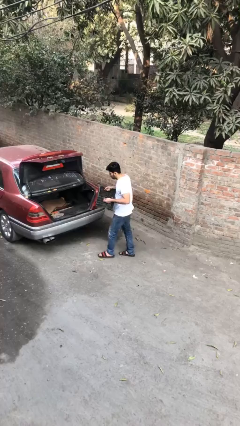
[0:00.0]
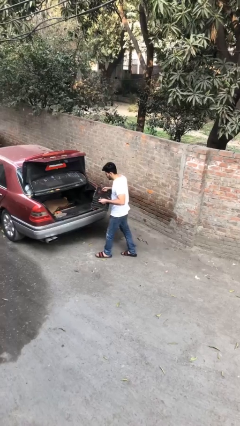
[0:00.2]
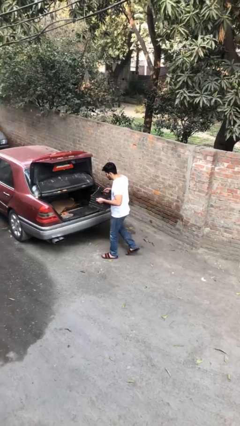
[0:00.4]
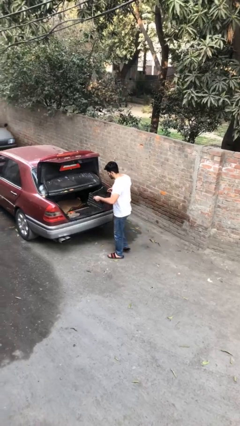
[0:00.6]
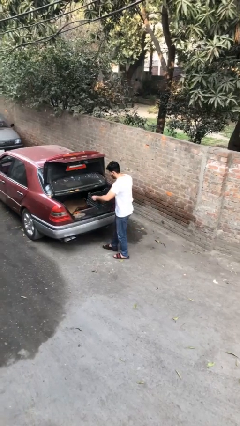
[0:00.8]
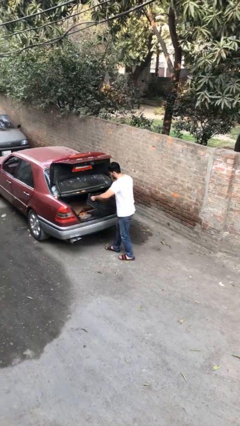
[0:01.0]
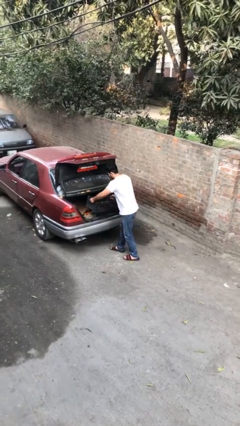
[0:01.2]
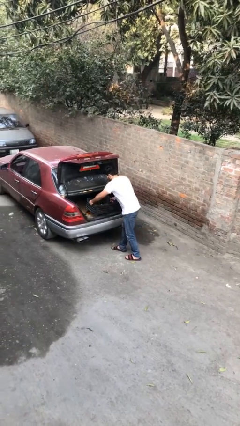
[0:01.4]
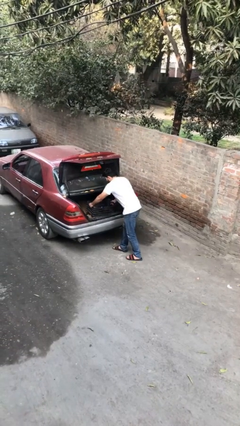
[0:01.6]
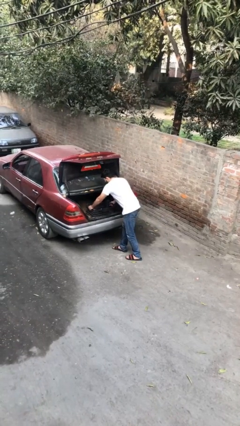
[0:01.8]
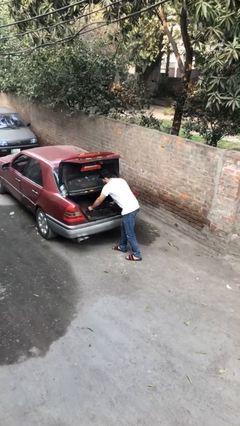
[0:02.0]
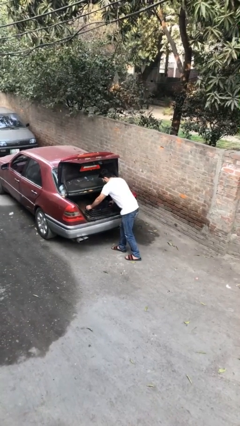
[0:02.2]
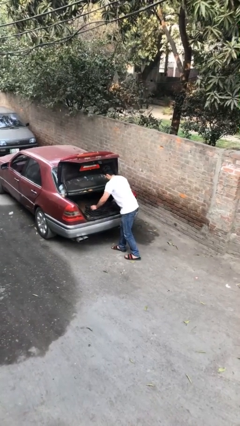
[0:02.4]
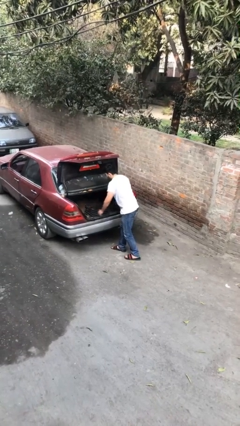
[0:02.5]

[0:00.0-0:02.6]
person loads car

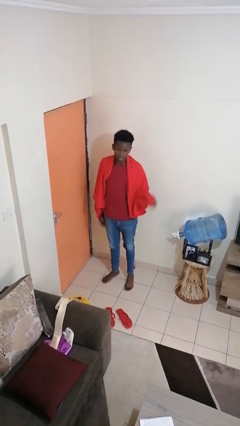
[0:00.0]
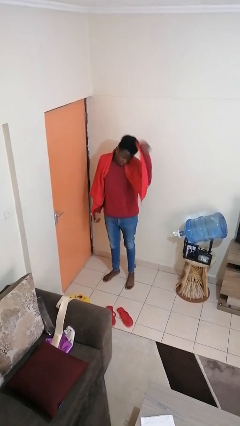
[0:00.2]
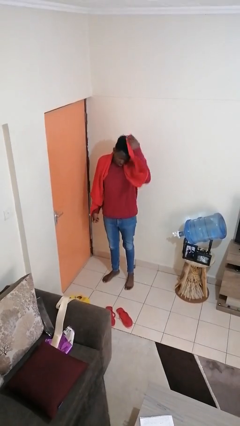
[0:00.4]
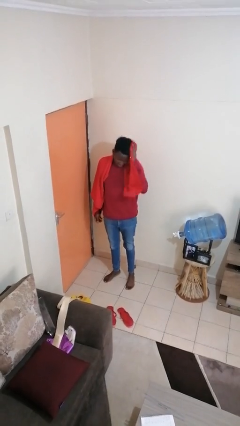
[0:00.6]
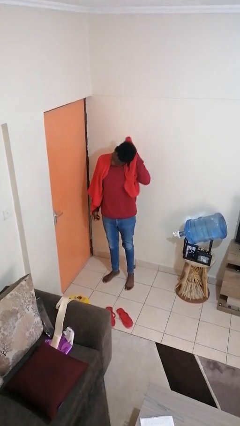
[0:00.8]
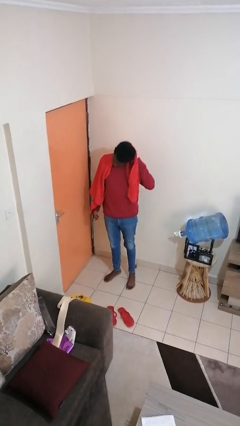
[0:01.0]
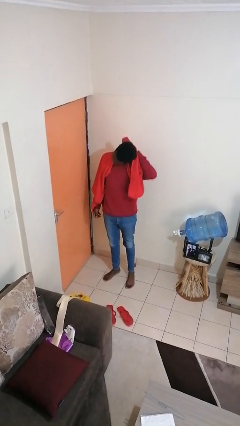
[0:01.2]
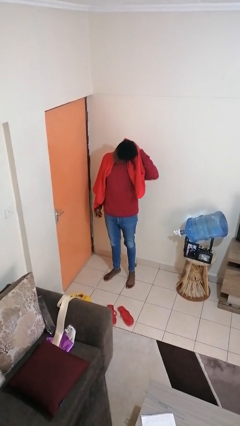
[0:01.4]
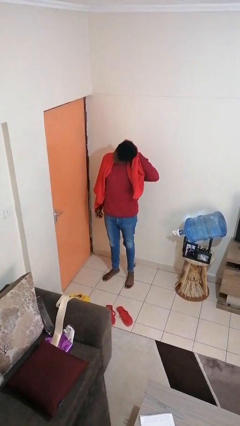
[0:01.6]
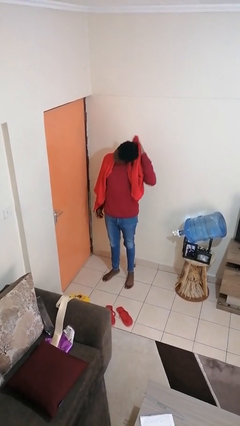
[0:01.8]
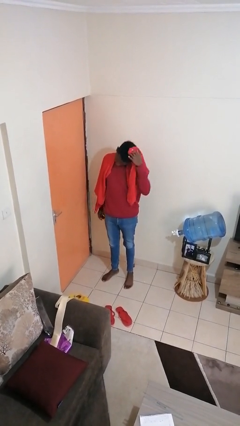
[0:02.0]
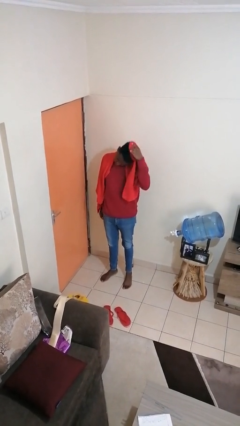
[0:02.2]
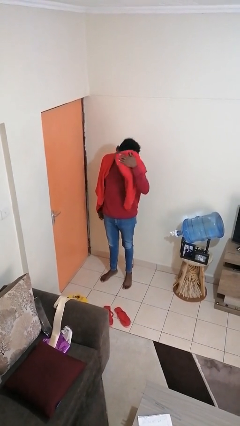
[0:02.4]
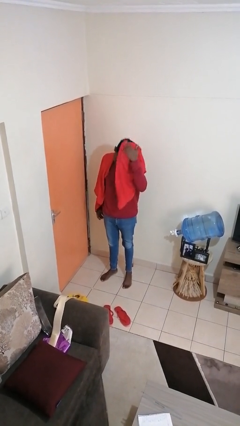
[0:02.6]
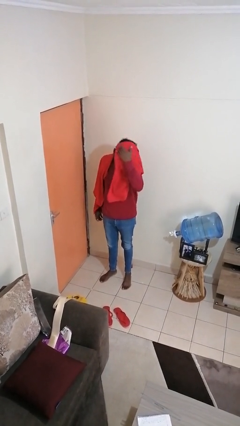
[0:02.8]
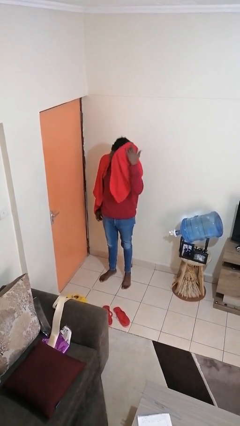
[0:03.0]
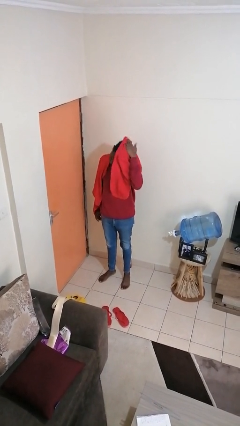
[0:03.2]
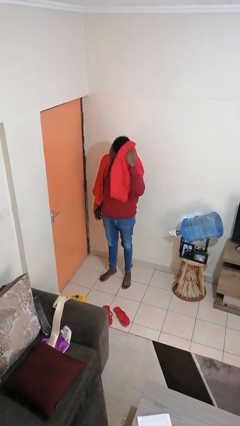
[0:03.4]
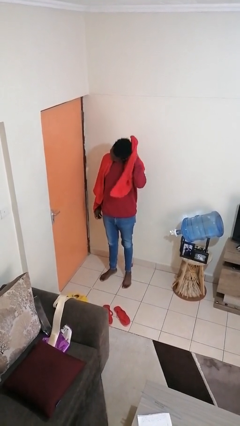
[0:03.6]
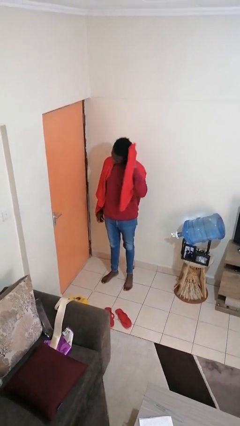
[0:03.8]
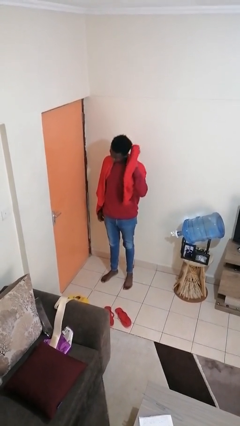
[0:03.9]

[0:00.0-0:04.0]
person dries hair with towel

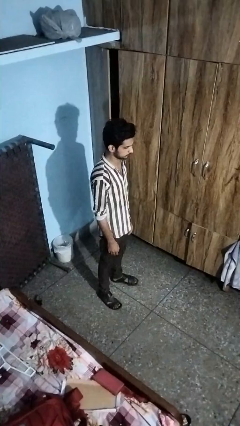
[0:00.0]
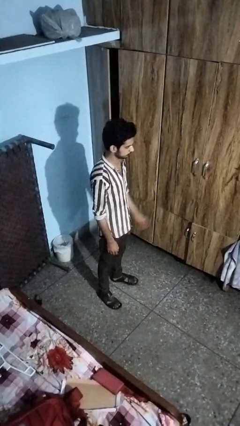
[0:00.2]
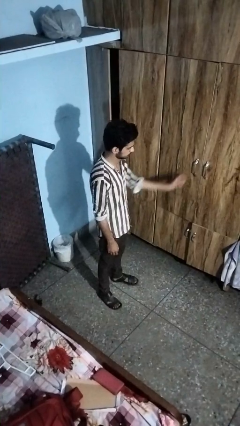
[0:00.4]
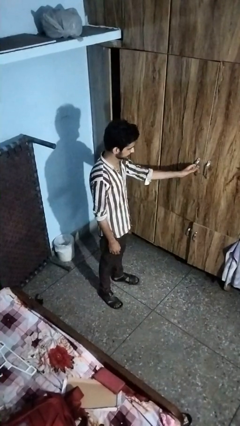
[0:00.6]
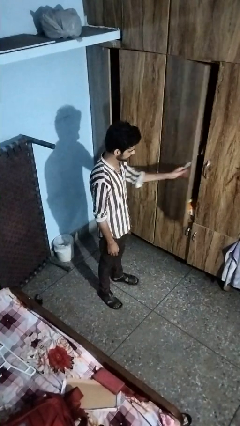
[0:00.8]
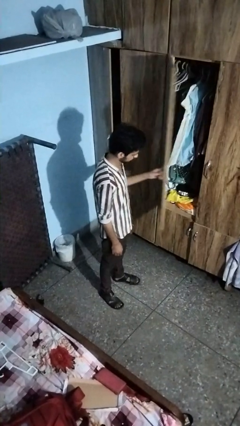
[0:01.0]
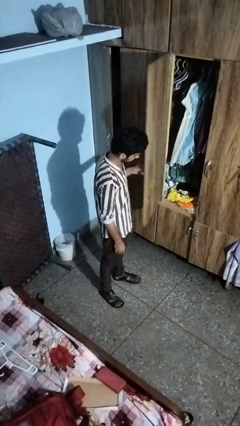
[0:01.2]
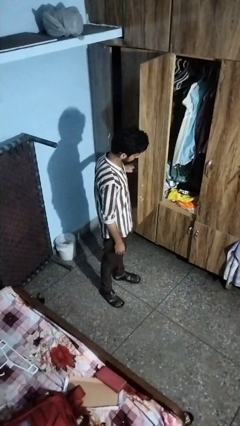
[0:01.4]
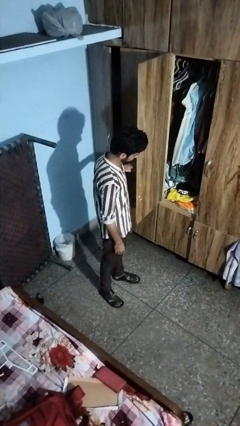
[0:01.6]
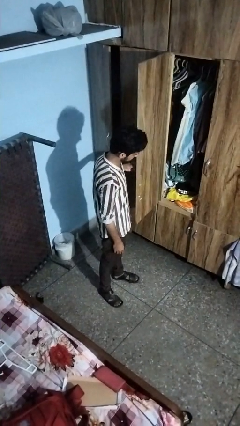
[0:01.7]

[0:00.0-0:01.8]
person opens closet door

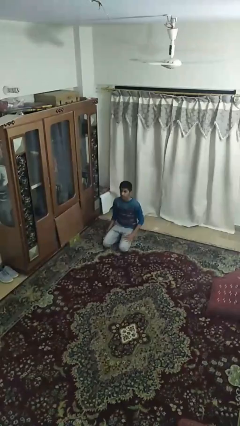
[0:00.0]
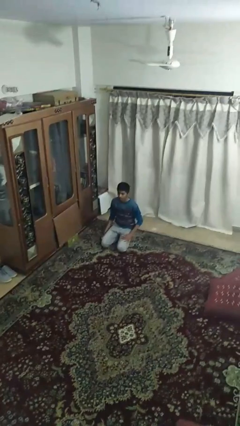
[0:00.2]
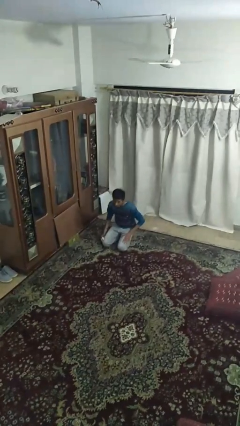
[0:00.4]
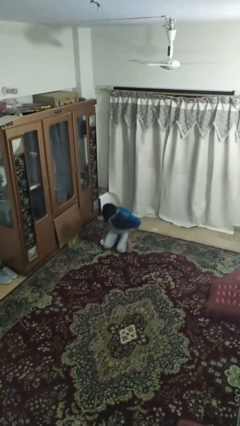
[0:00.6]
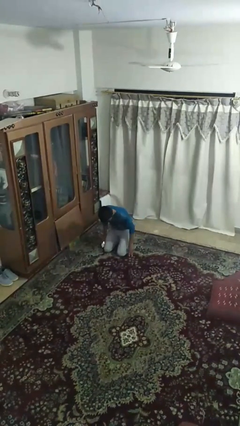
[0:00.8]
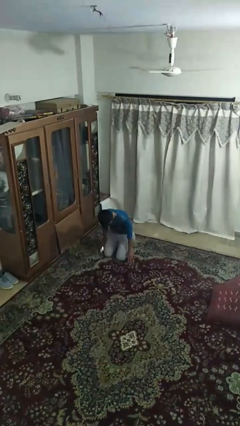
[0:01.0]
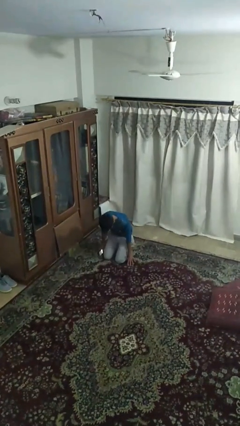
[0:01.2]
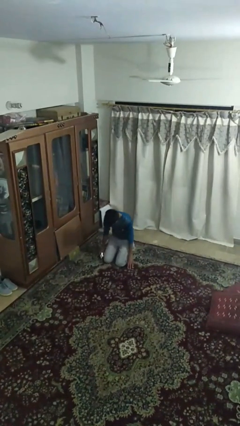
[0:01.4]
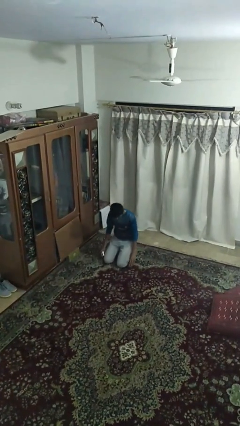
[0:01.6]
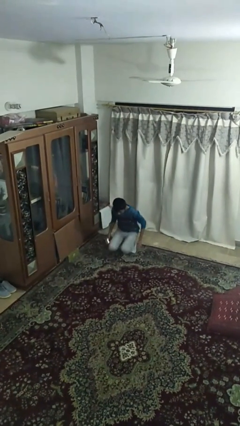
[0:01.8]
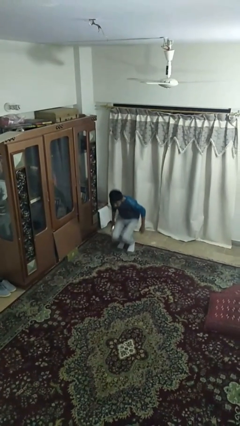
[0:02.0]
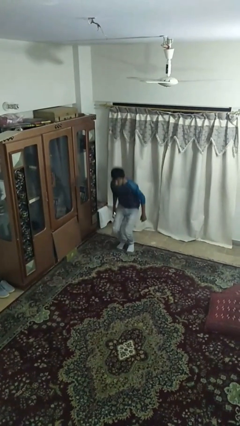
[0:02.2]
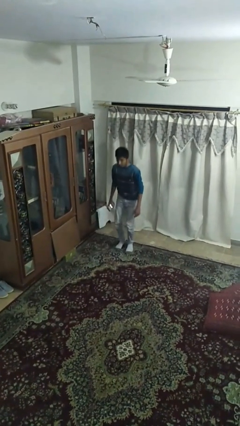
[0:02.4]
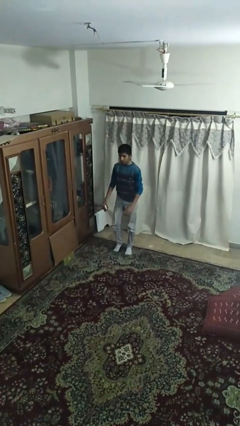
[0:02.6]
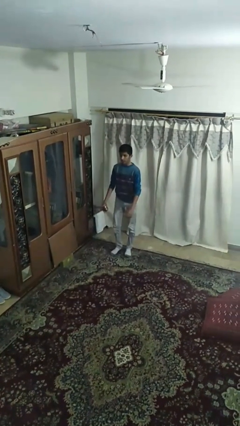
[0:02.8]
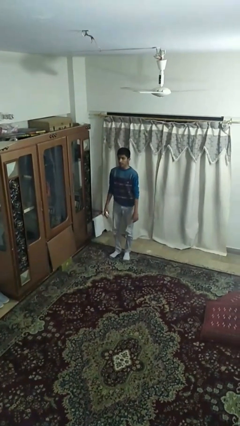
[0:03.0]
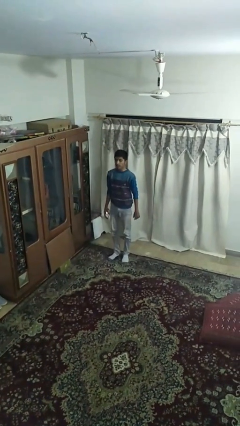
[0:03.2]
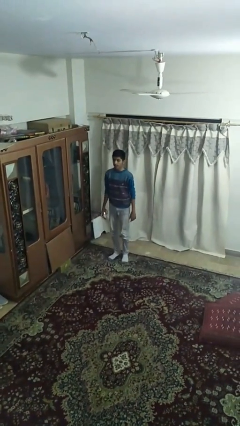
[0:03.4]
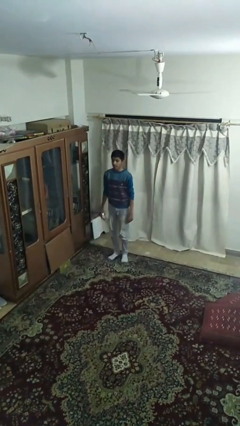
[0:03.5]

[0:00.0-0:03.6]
person stands up

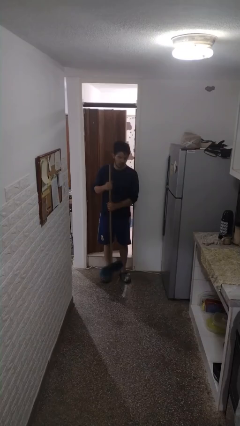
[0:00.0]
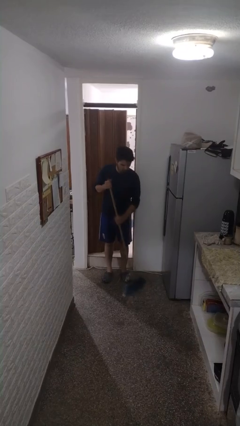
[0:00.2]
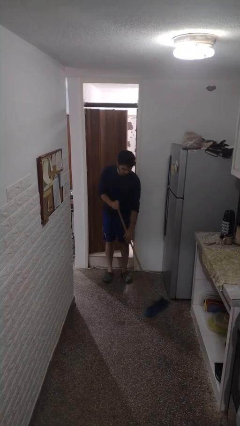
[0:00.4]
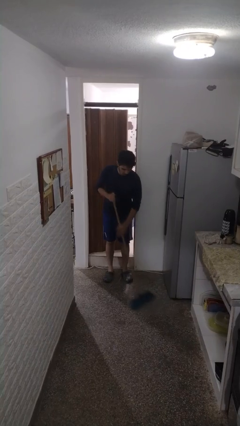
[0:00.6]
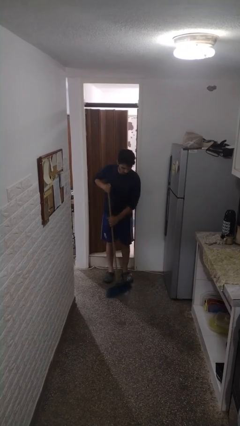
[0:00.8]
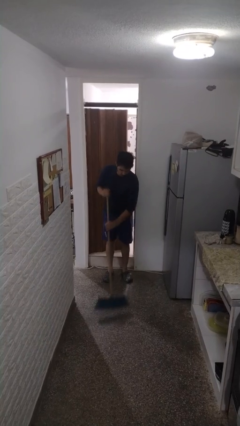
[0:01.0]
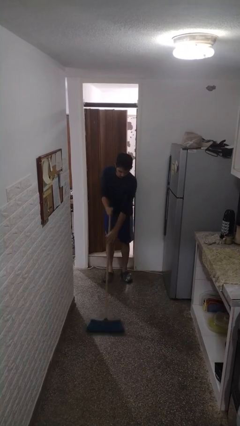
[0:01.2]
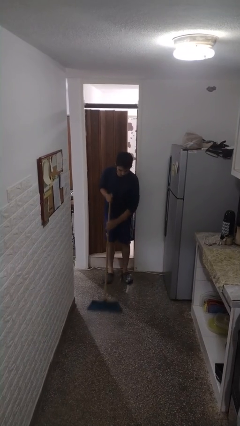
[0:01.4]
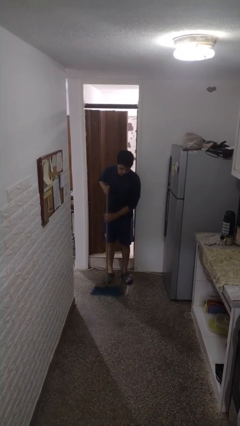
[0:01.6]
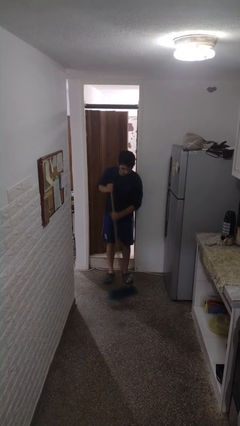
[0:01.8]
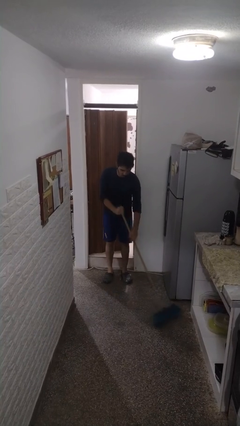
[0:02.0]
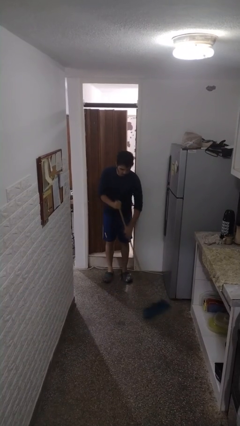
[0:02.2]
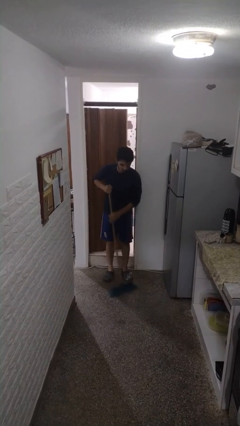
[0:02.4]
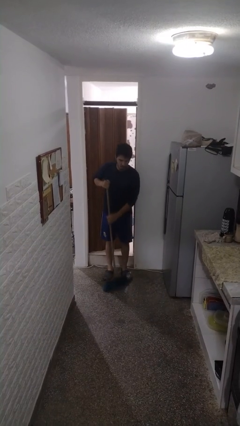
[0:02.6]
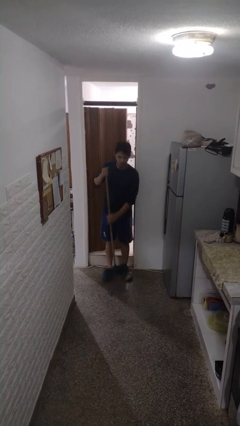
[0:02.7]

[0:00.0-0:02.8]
person sweeps floor

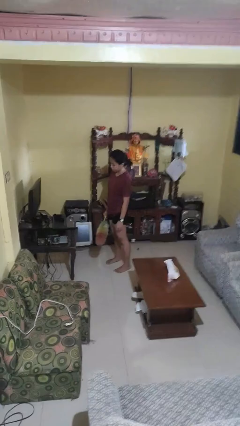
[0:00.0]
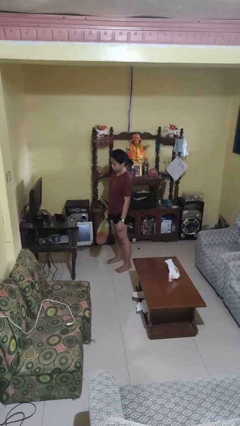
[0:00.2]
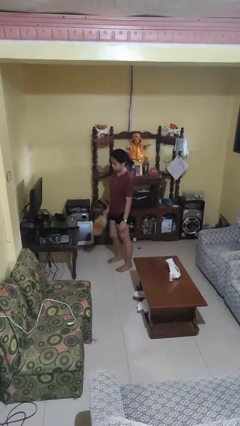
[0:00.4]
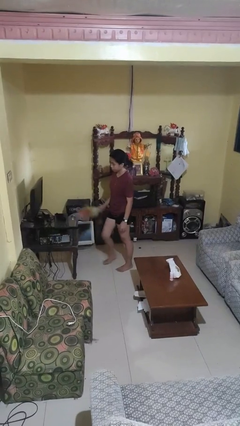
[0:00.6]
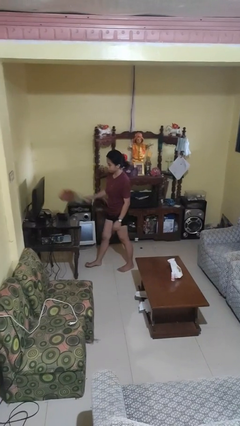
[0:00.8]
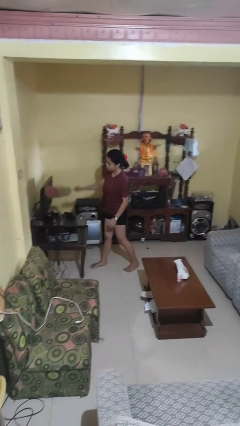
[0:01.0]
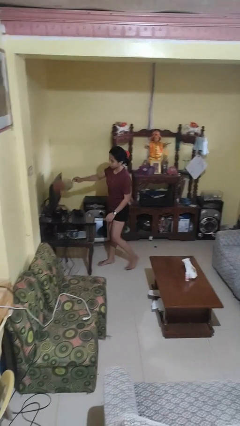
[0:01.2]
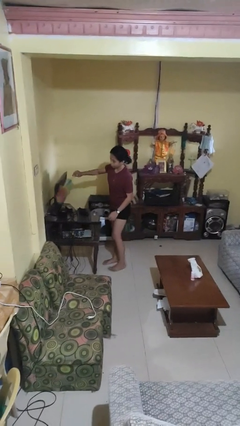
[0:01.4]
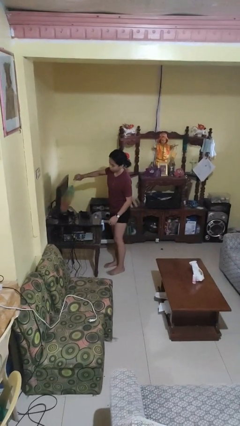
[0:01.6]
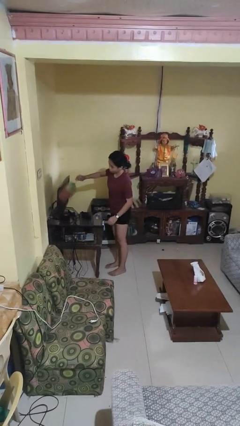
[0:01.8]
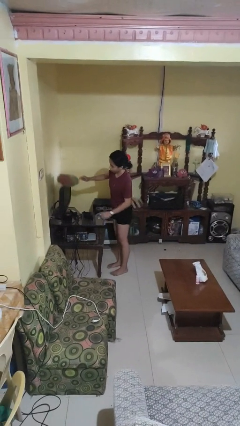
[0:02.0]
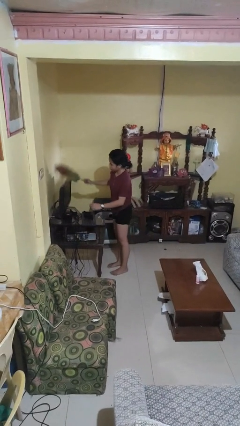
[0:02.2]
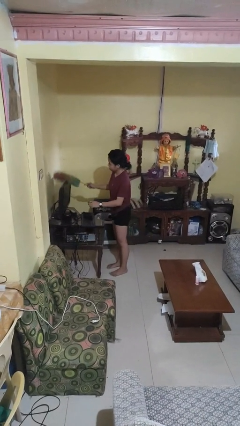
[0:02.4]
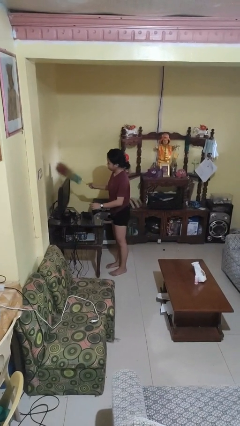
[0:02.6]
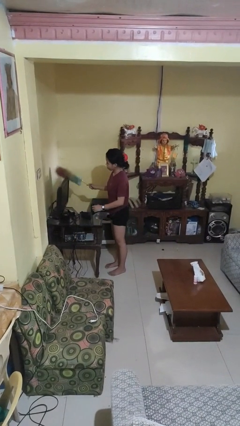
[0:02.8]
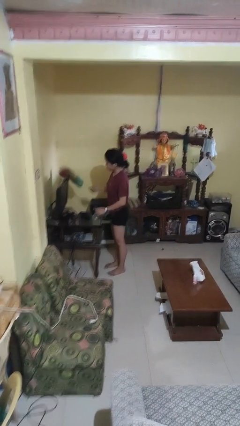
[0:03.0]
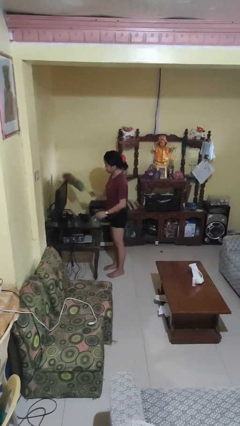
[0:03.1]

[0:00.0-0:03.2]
person dusts furniture
